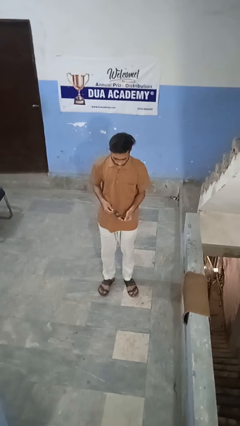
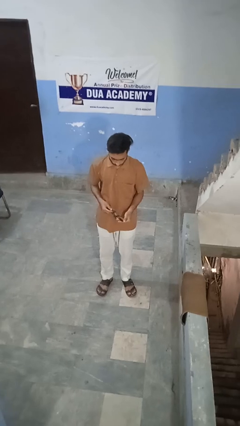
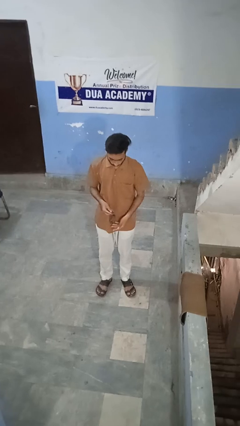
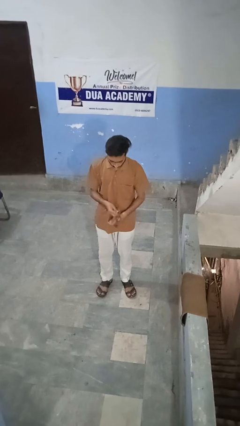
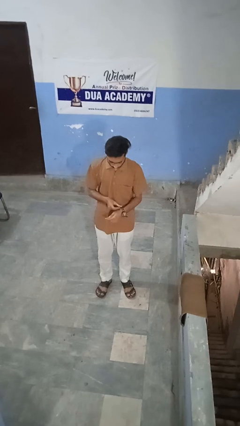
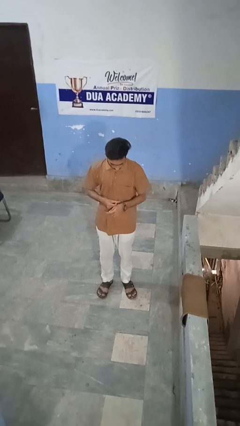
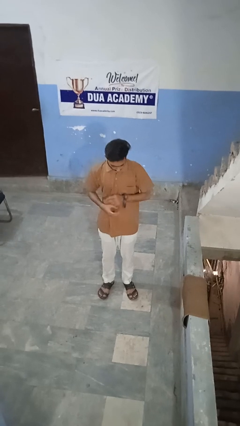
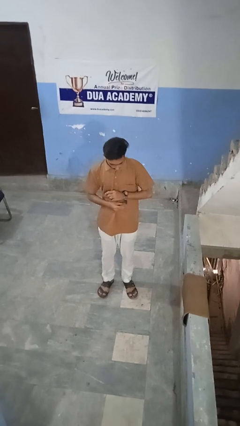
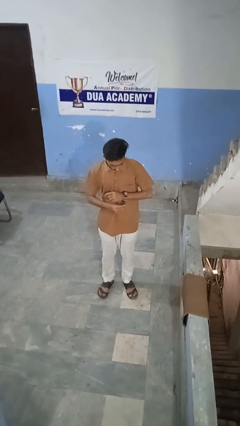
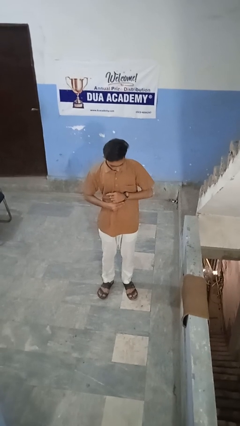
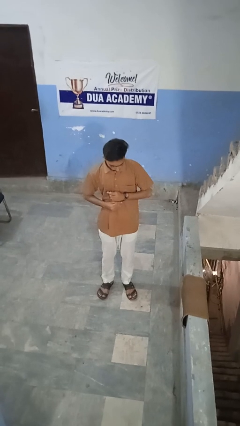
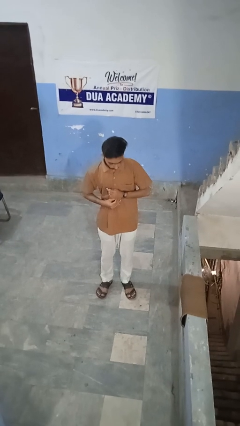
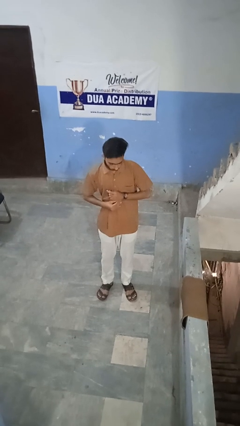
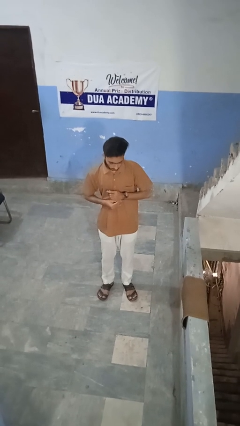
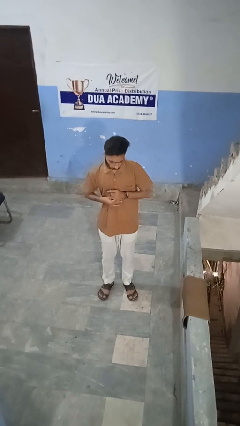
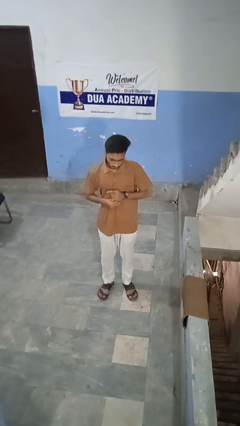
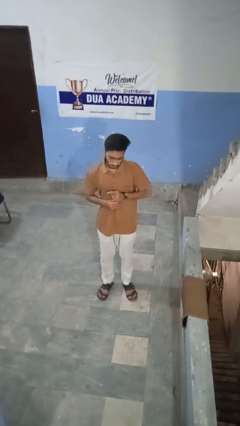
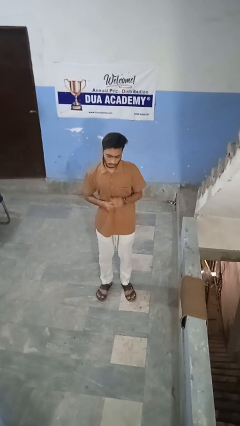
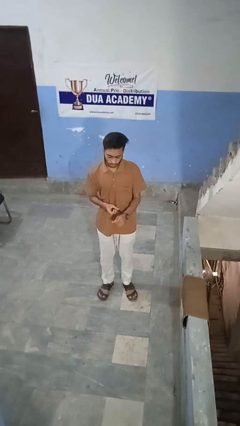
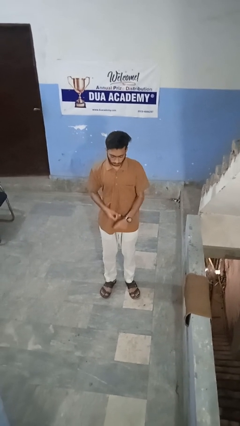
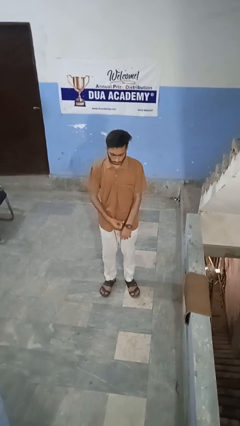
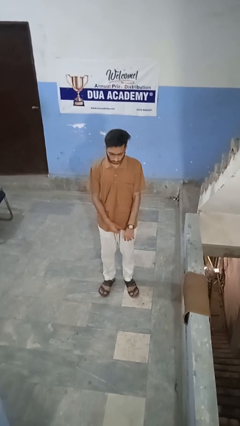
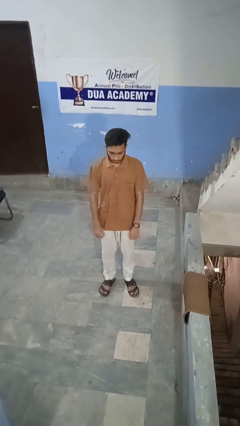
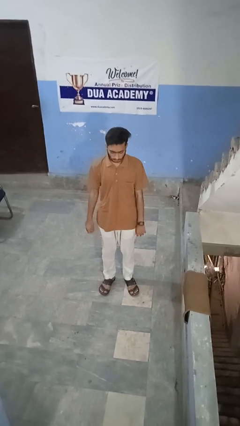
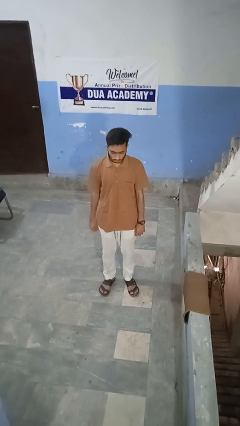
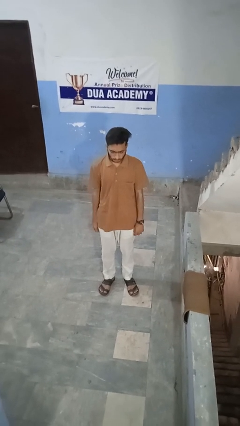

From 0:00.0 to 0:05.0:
person puts on wristwatch

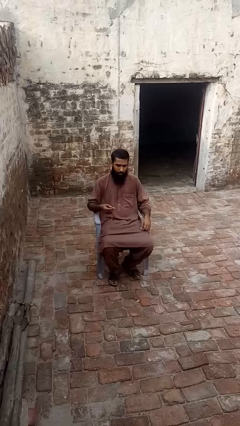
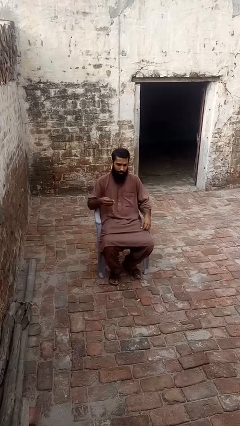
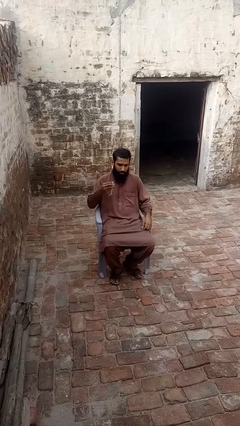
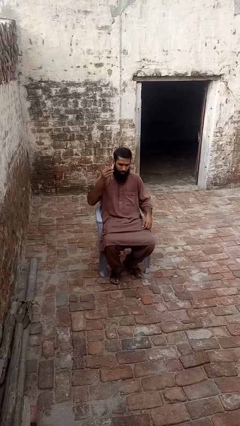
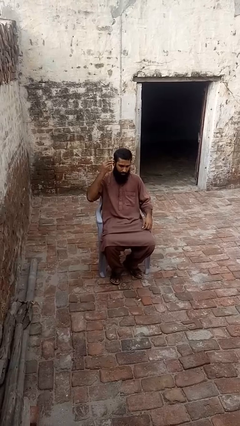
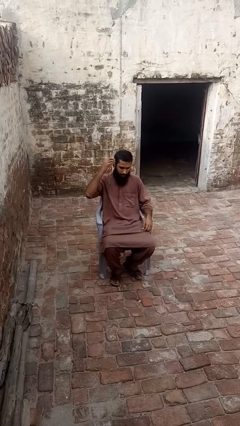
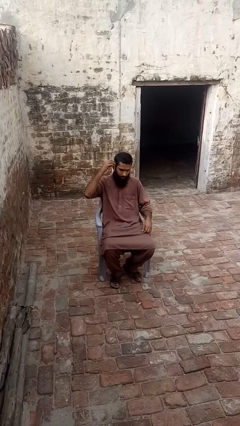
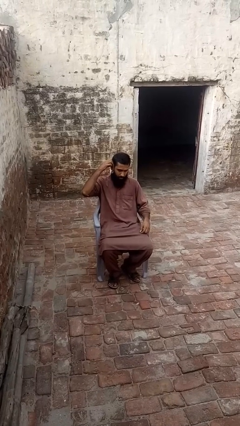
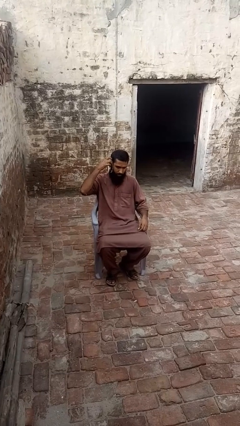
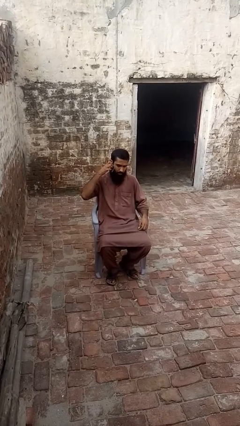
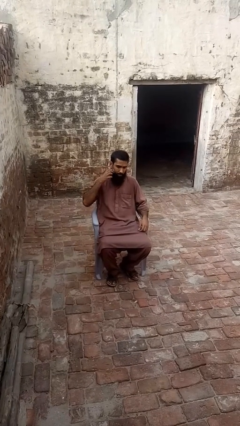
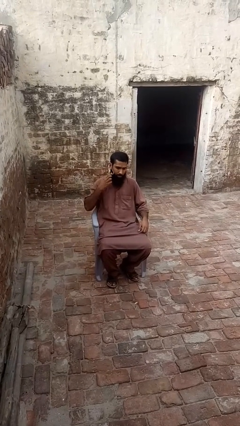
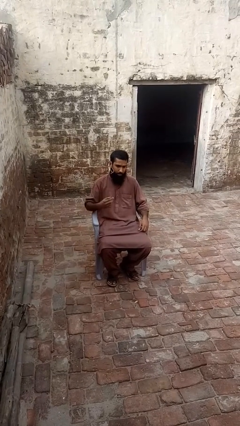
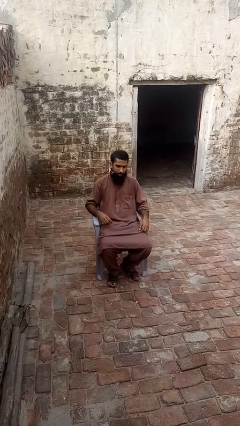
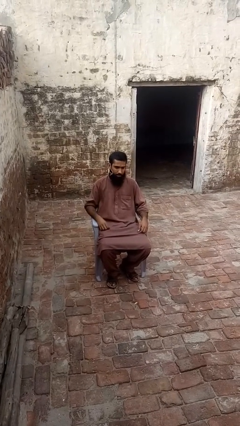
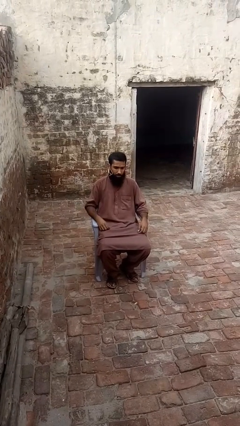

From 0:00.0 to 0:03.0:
person puts on earrings

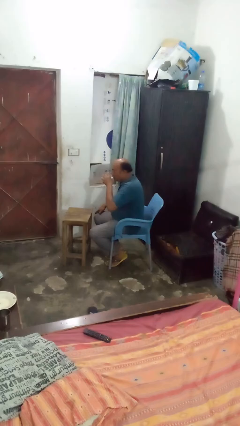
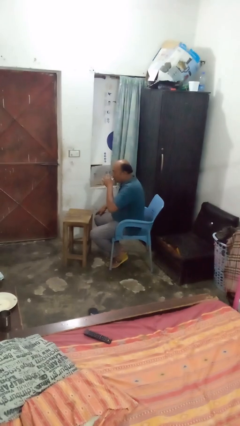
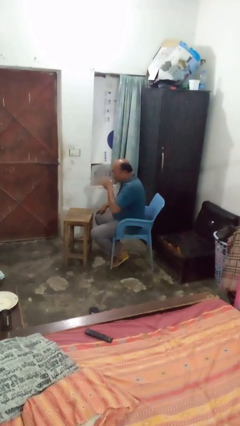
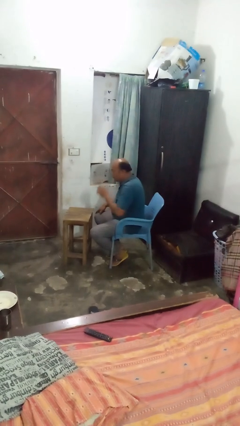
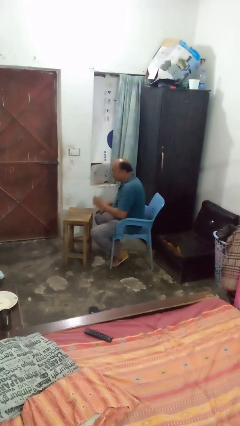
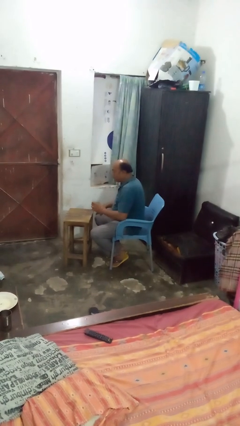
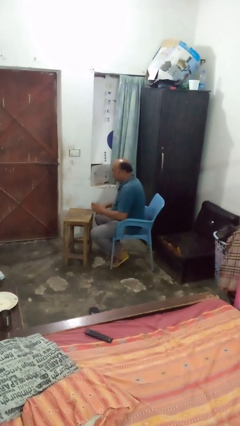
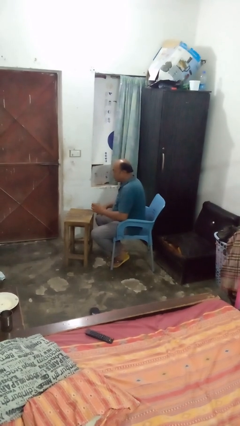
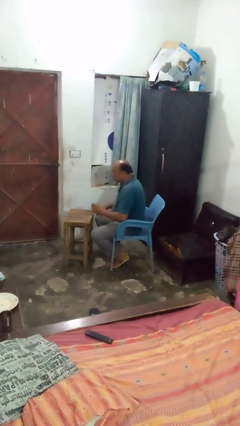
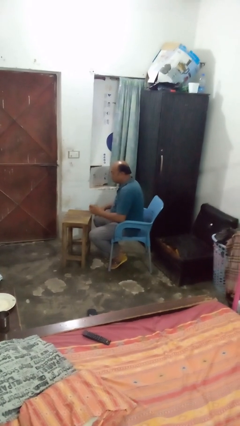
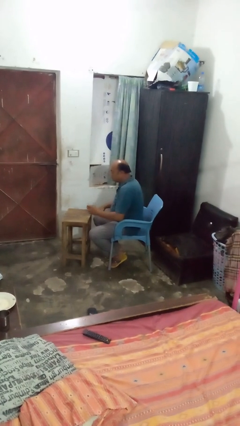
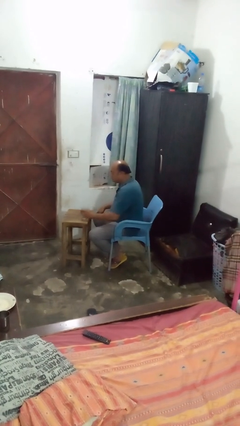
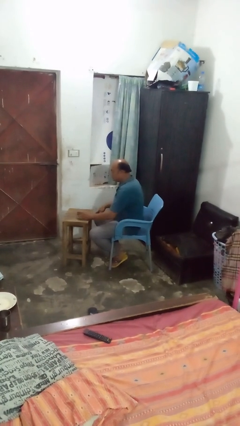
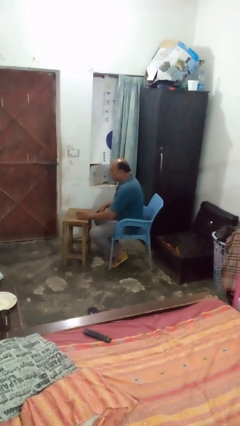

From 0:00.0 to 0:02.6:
person puts down object on table

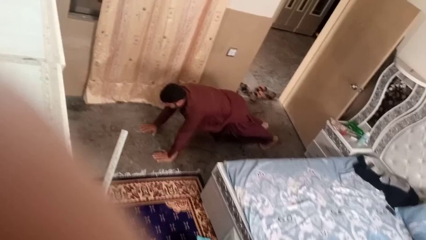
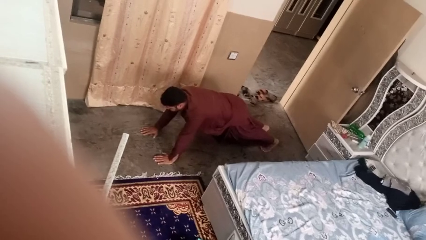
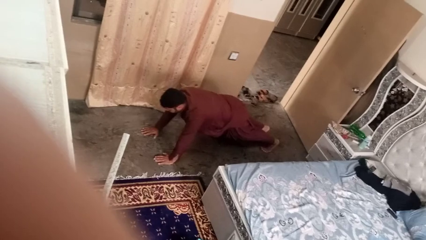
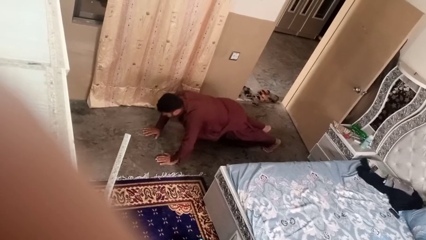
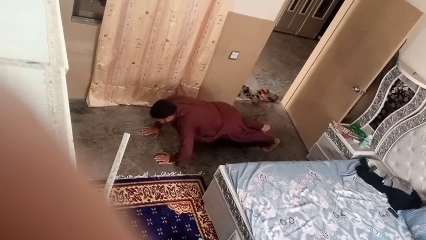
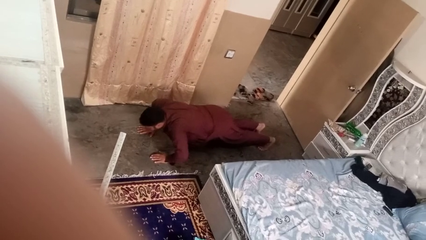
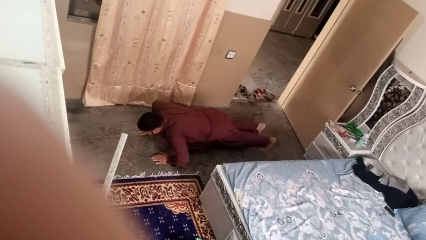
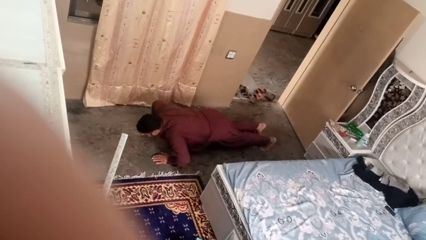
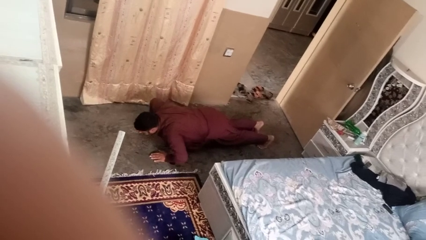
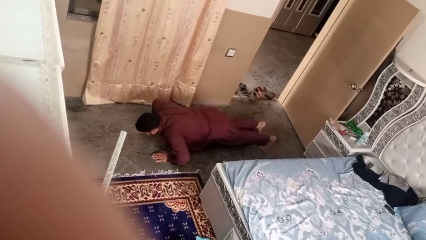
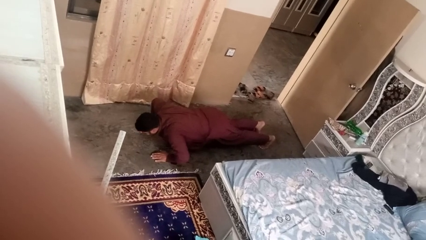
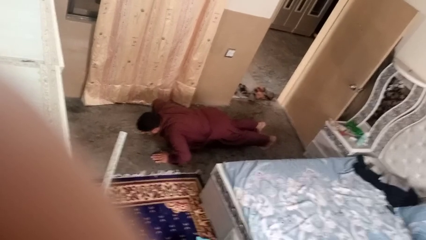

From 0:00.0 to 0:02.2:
person exercises with pushup

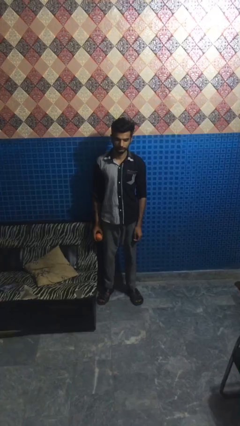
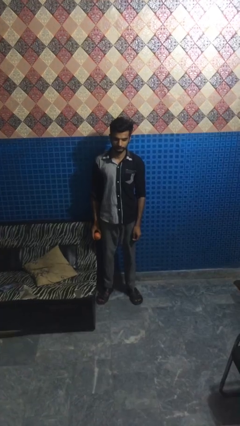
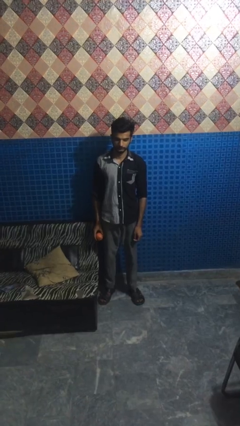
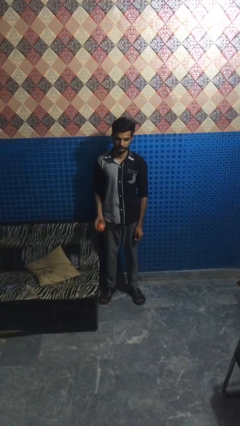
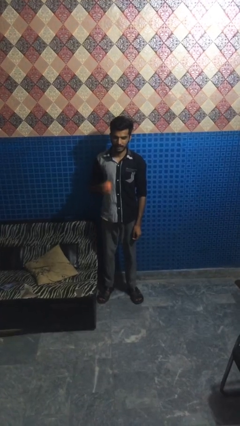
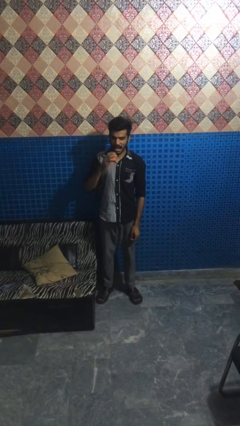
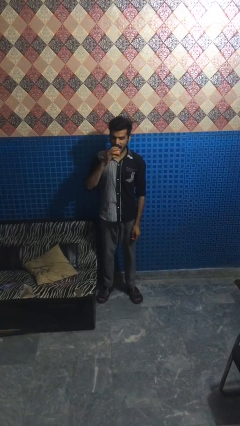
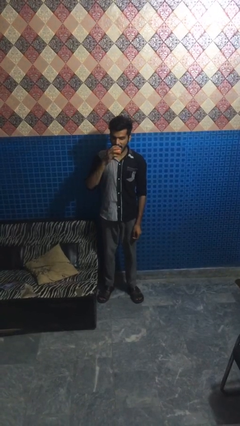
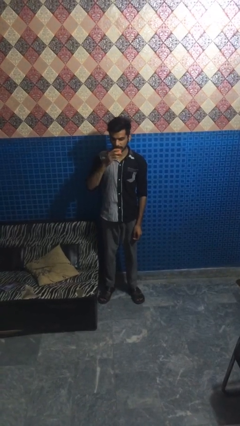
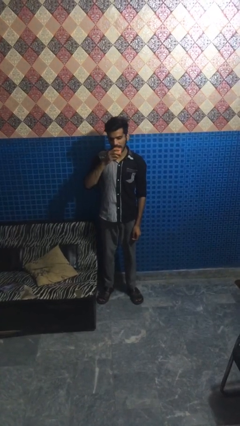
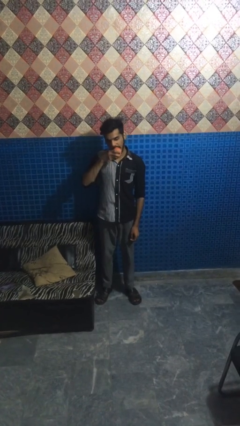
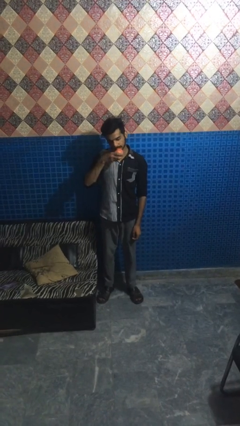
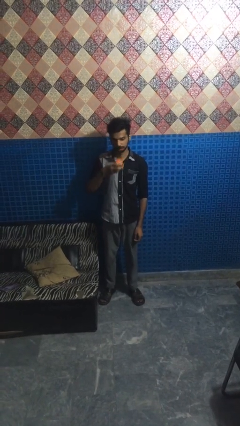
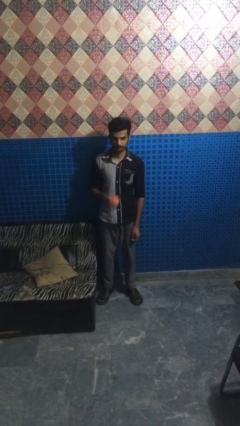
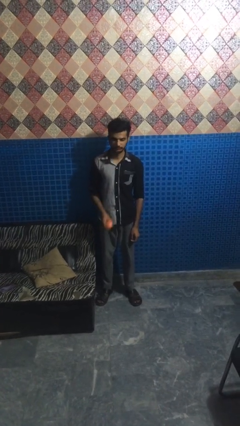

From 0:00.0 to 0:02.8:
person eats apple

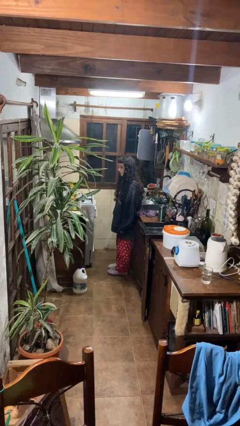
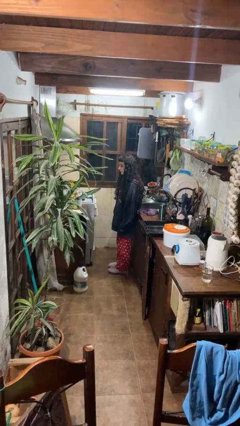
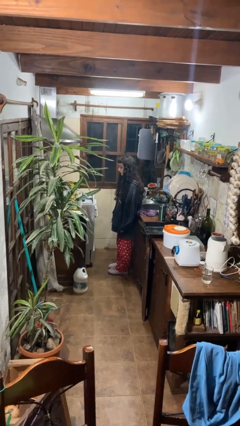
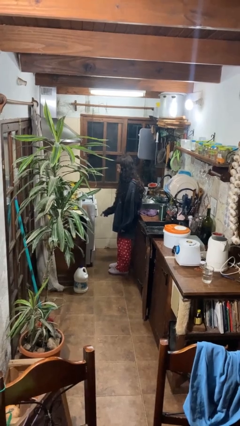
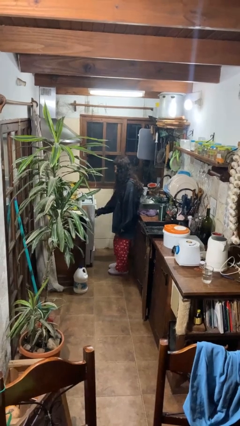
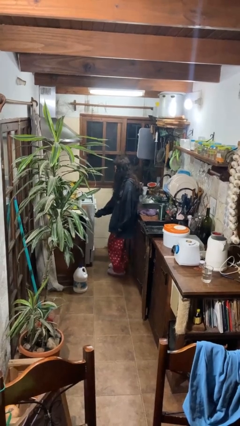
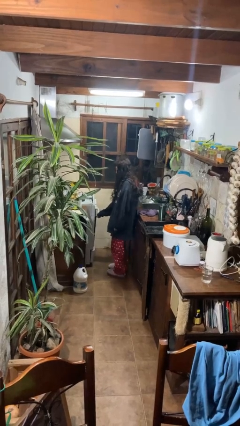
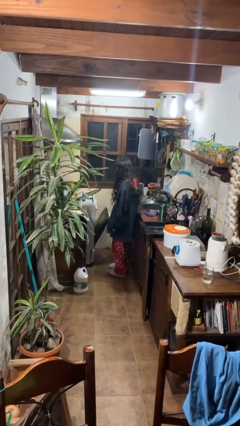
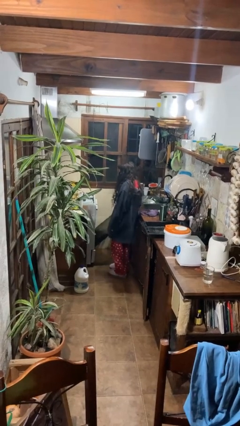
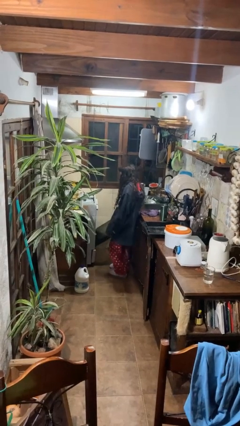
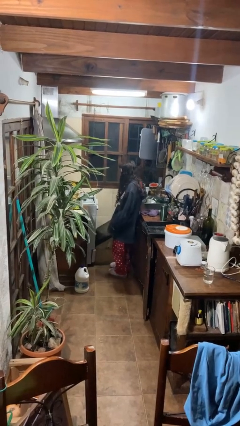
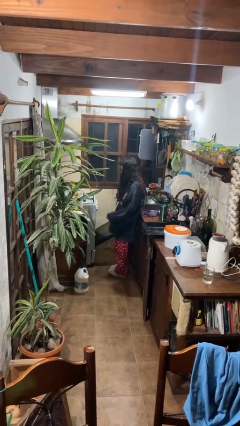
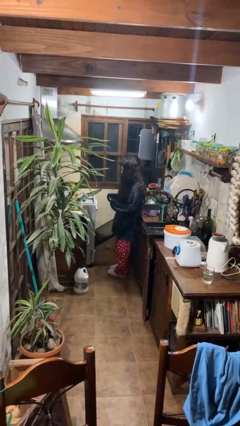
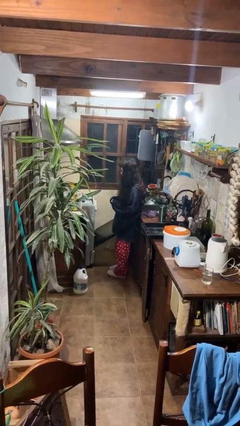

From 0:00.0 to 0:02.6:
person opens oven door
